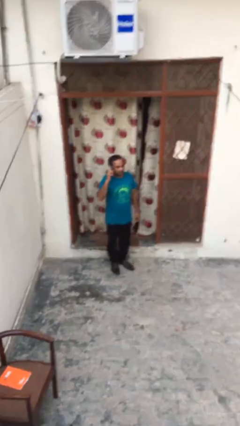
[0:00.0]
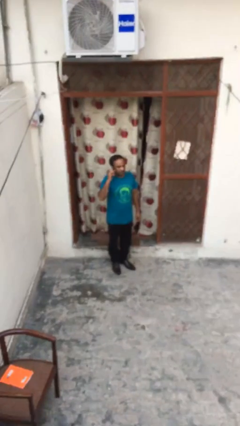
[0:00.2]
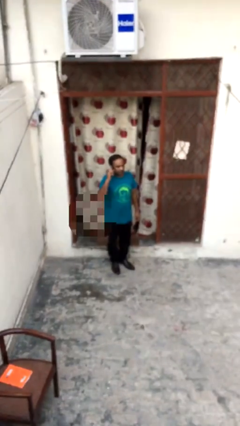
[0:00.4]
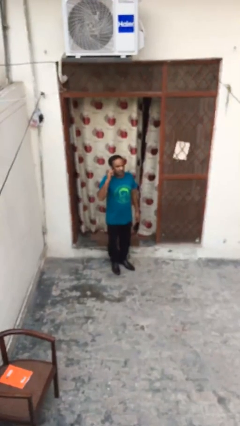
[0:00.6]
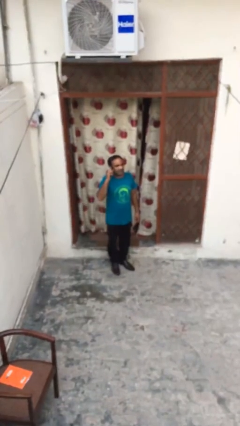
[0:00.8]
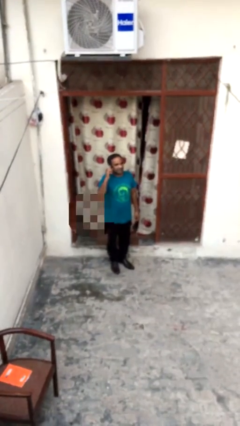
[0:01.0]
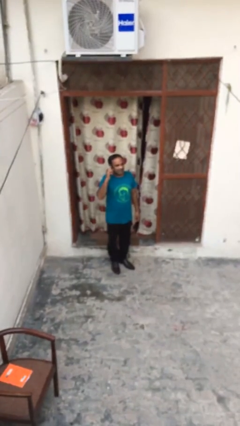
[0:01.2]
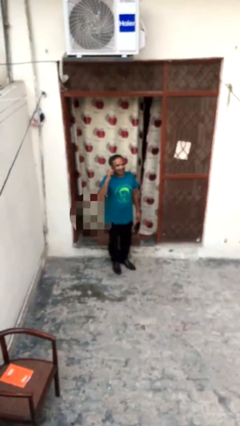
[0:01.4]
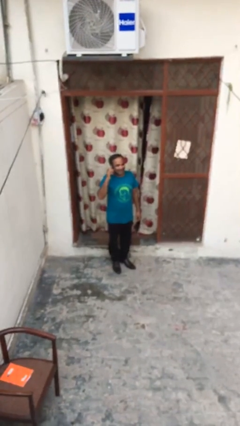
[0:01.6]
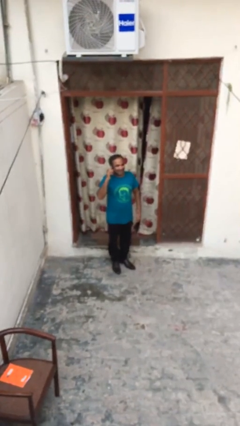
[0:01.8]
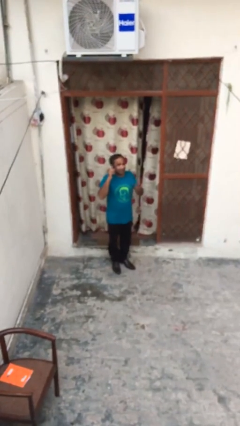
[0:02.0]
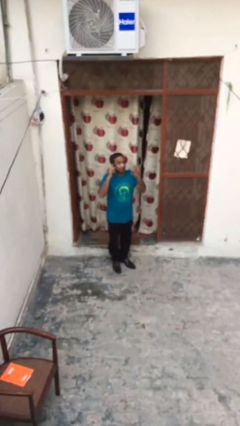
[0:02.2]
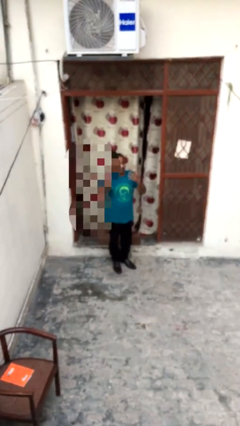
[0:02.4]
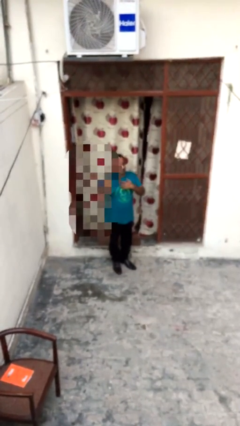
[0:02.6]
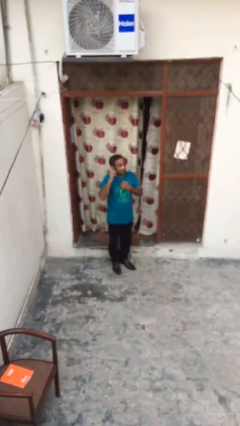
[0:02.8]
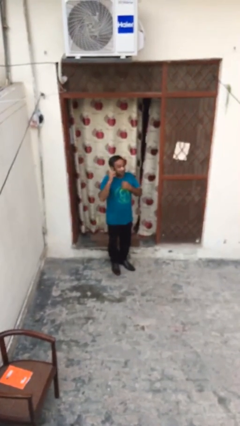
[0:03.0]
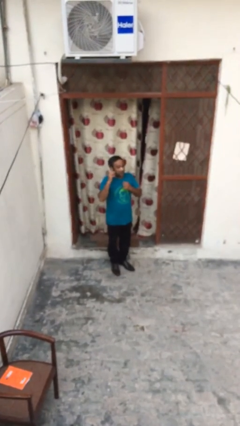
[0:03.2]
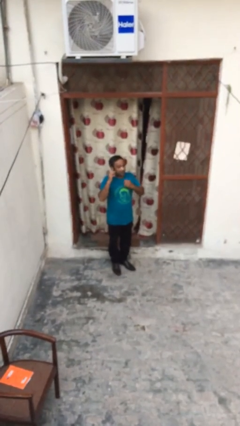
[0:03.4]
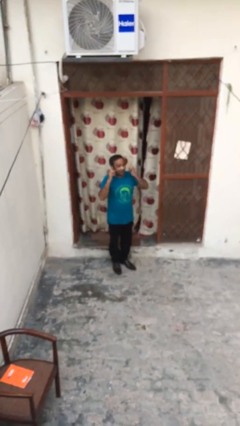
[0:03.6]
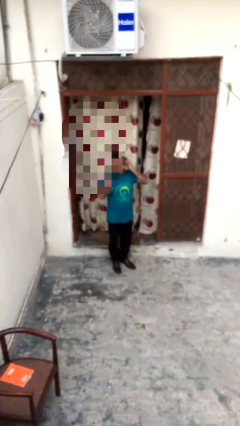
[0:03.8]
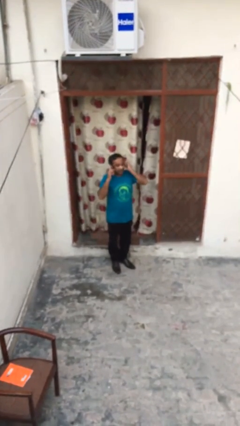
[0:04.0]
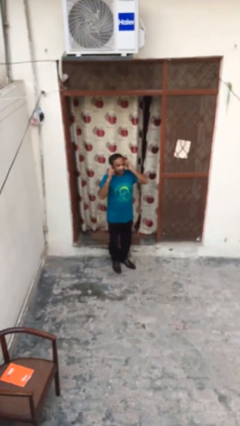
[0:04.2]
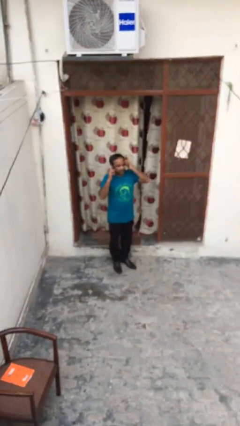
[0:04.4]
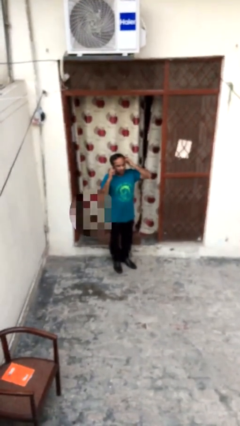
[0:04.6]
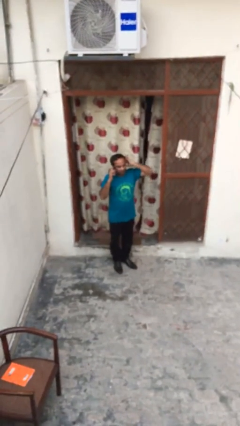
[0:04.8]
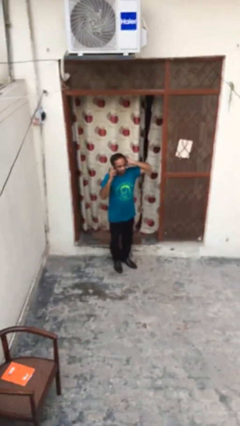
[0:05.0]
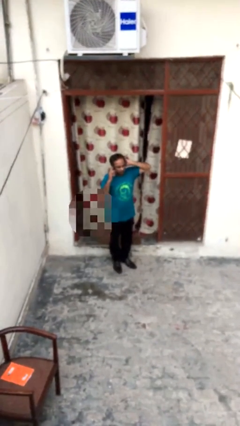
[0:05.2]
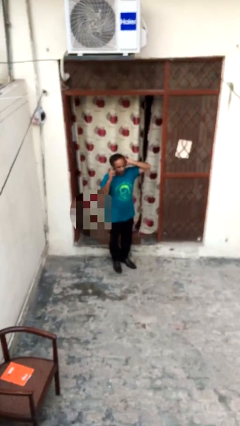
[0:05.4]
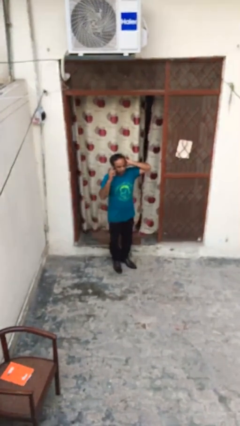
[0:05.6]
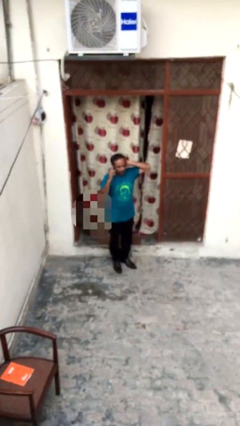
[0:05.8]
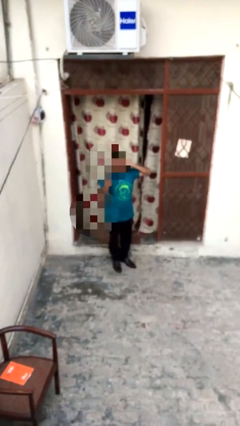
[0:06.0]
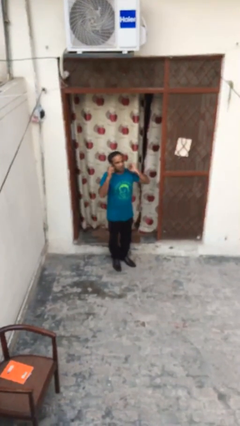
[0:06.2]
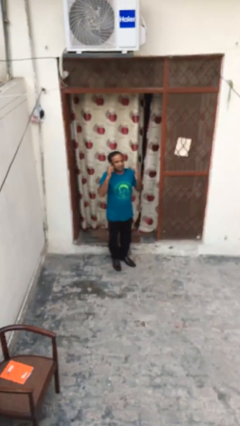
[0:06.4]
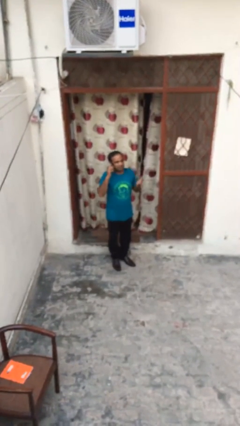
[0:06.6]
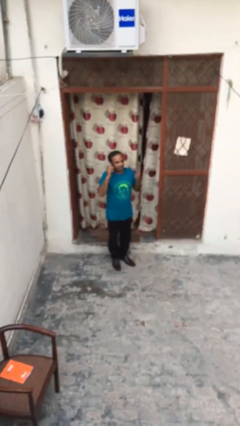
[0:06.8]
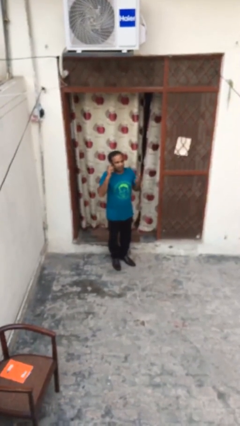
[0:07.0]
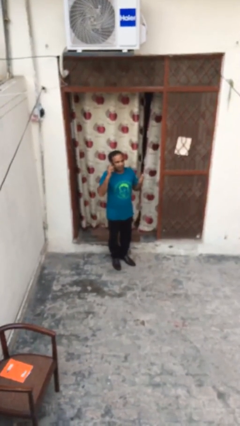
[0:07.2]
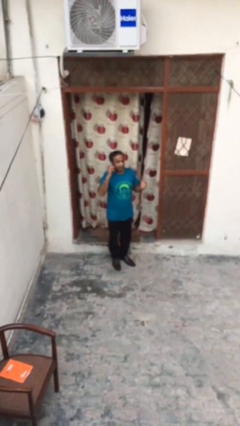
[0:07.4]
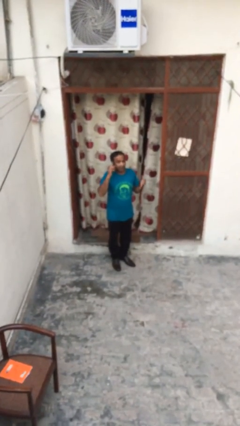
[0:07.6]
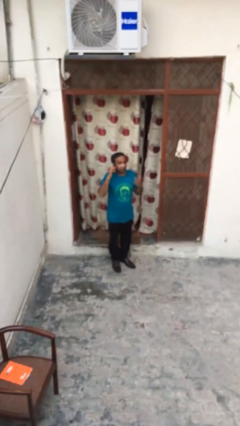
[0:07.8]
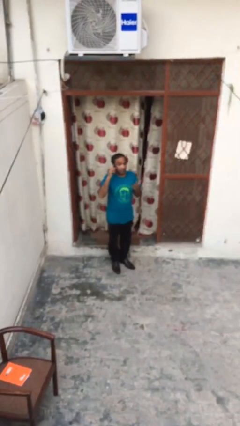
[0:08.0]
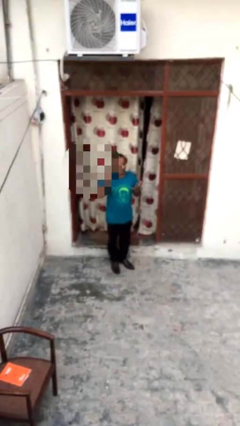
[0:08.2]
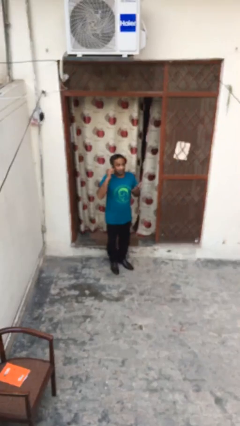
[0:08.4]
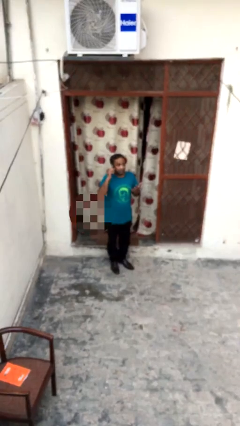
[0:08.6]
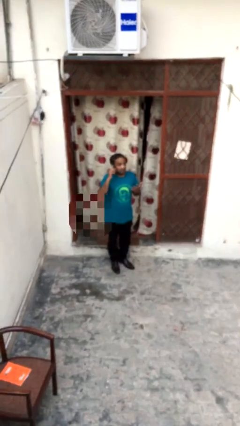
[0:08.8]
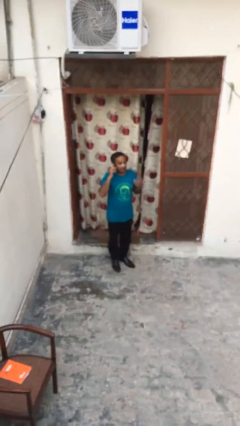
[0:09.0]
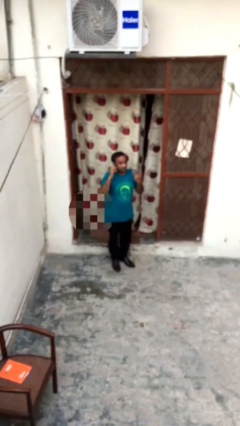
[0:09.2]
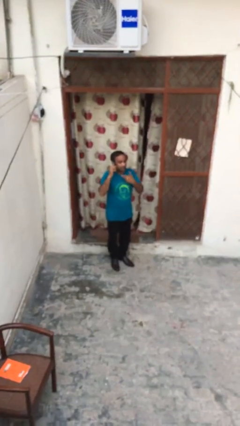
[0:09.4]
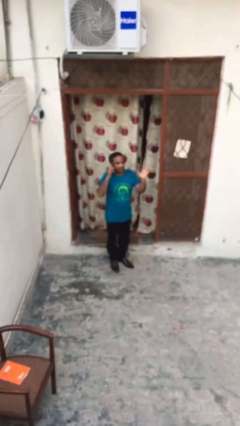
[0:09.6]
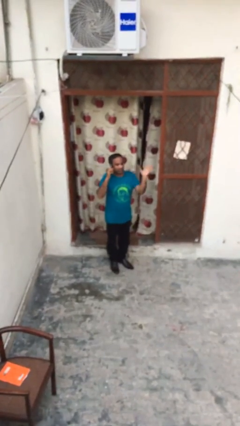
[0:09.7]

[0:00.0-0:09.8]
person talks on phone

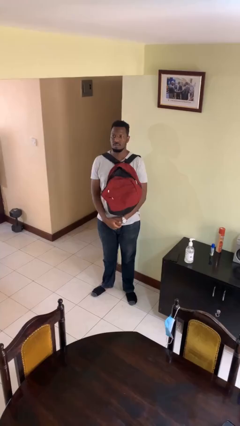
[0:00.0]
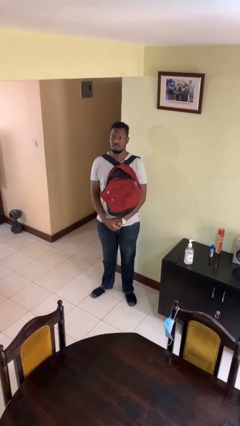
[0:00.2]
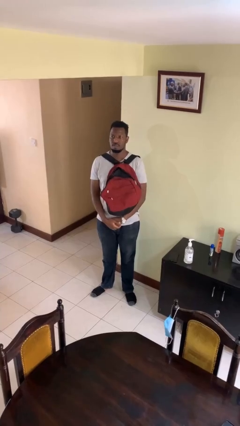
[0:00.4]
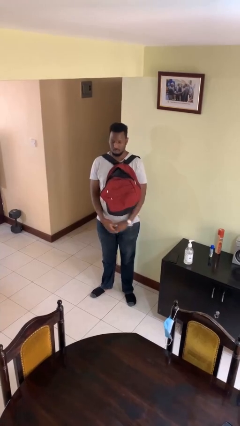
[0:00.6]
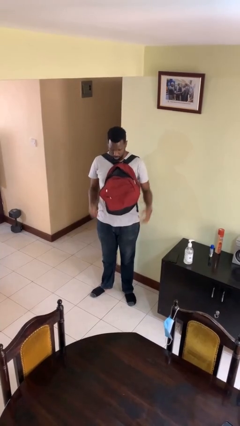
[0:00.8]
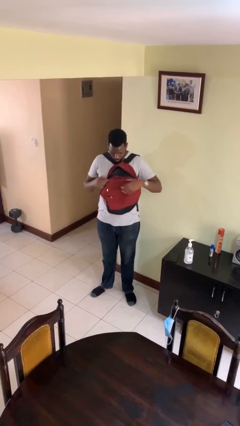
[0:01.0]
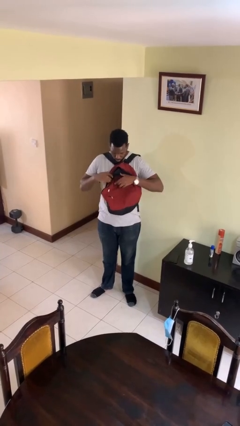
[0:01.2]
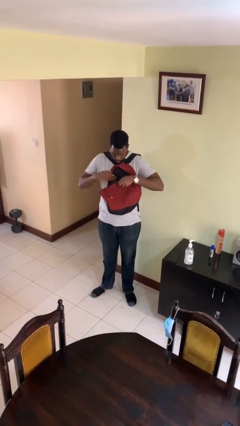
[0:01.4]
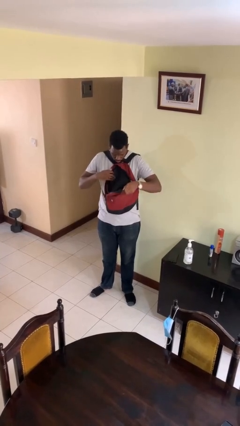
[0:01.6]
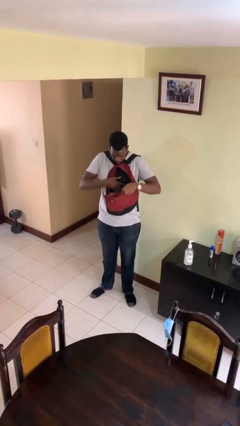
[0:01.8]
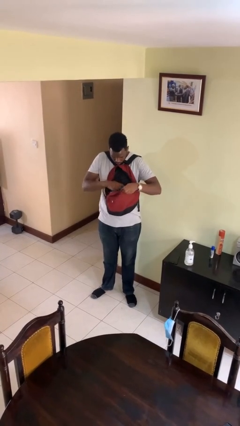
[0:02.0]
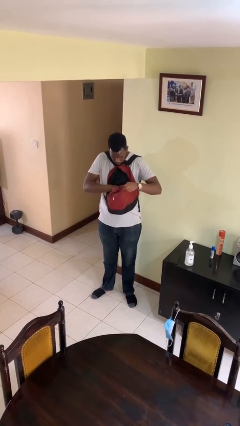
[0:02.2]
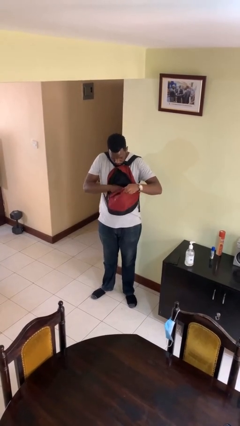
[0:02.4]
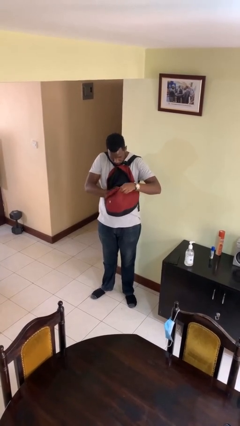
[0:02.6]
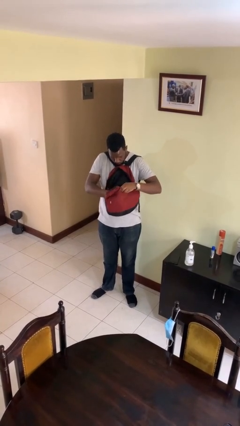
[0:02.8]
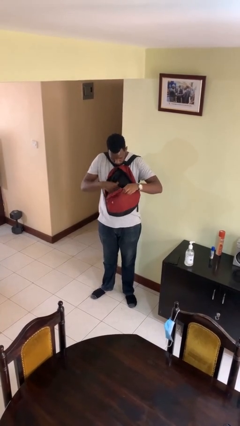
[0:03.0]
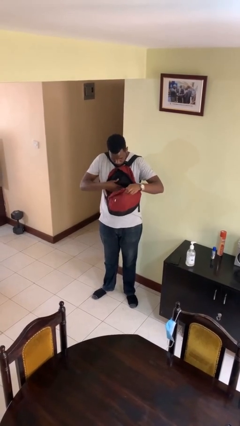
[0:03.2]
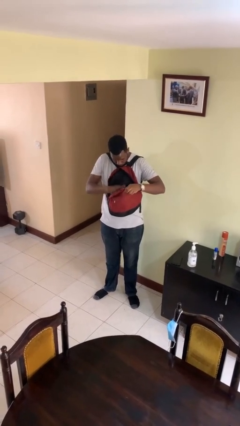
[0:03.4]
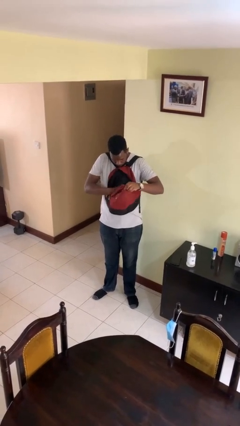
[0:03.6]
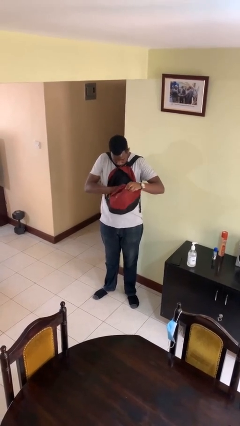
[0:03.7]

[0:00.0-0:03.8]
person searches in backpack

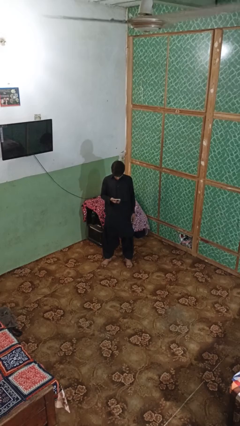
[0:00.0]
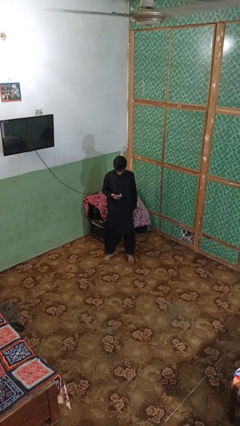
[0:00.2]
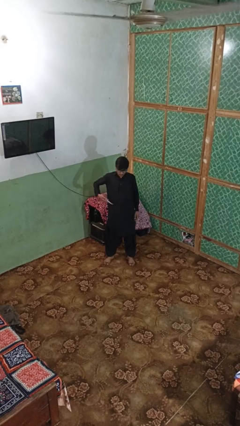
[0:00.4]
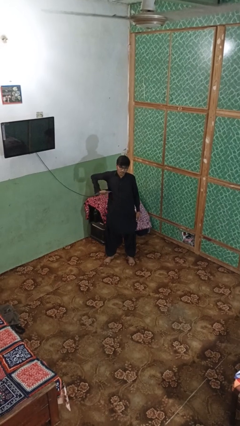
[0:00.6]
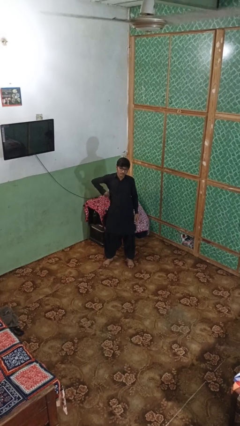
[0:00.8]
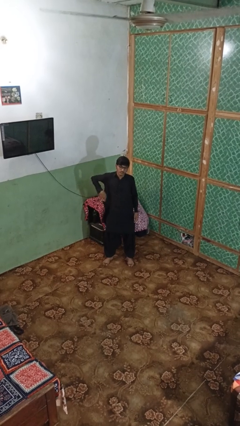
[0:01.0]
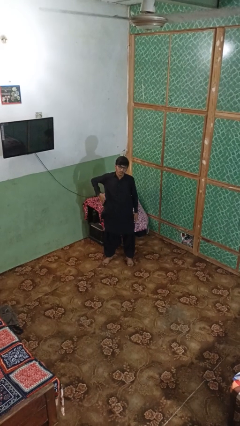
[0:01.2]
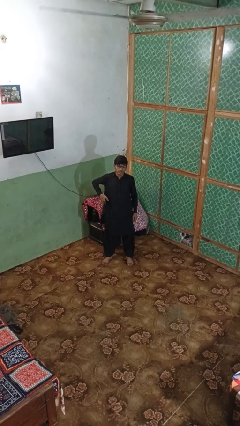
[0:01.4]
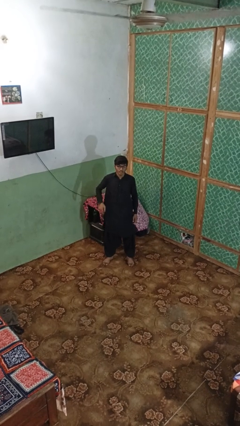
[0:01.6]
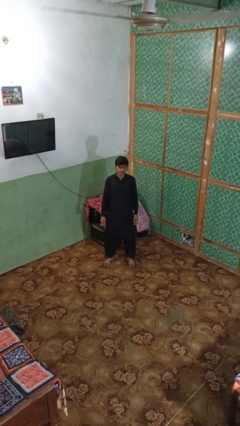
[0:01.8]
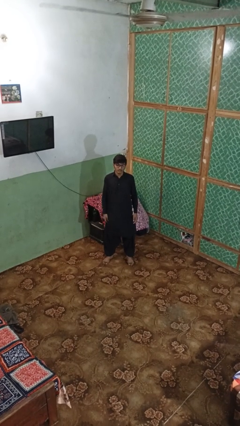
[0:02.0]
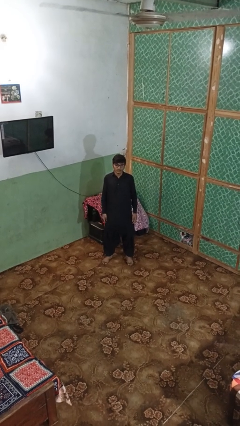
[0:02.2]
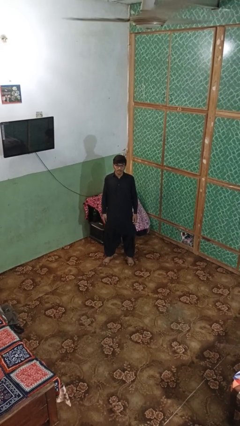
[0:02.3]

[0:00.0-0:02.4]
person puts phone into pocket

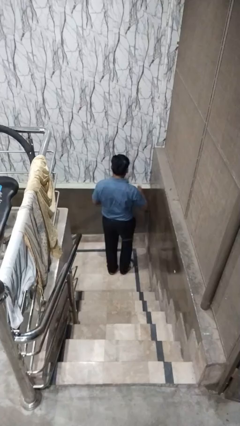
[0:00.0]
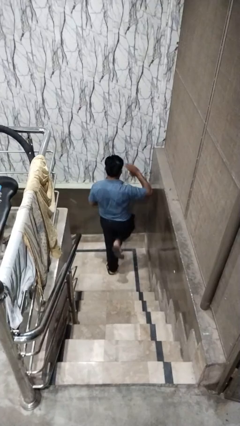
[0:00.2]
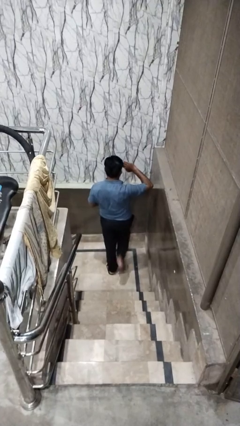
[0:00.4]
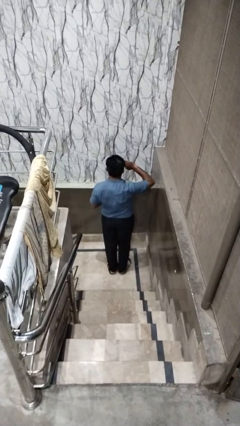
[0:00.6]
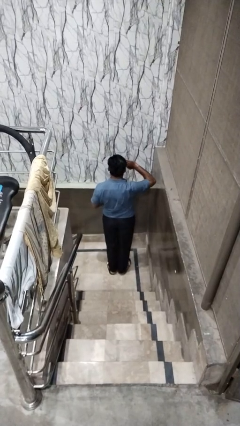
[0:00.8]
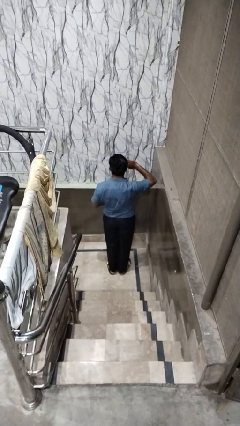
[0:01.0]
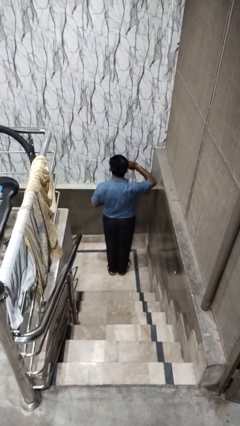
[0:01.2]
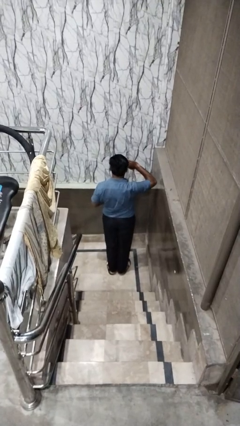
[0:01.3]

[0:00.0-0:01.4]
person salutes

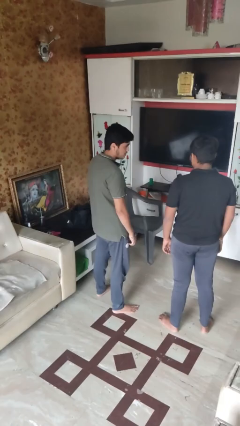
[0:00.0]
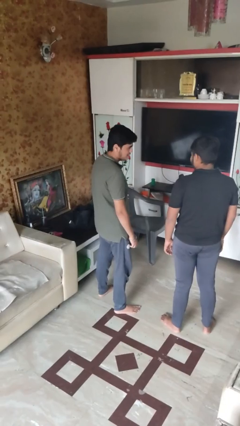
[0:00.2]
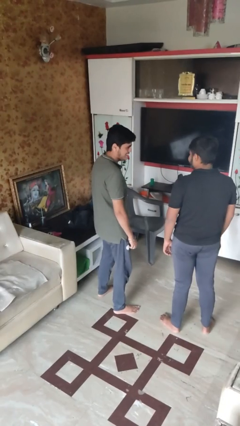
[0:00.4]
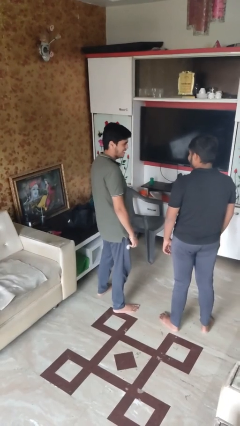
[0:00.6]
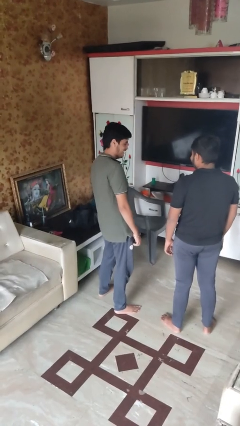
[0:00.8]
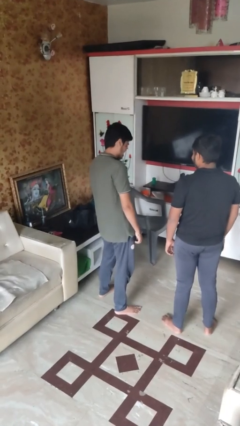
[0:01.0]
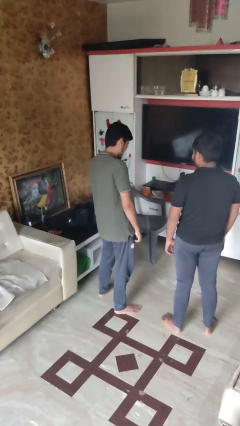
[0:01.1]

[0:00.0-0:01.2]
person laughs with person
